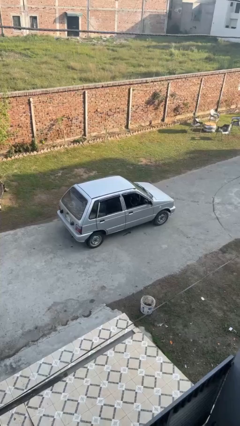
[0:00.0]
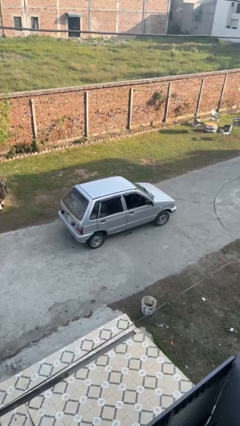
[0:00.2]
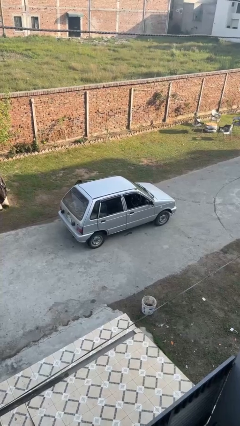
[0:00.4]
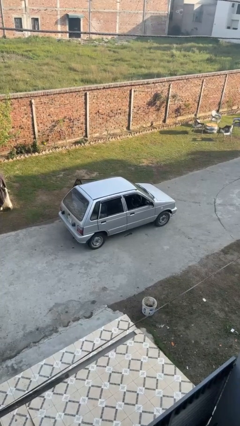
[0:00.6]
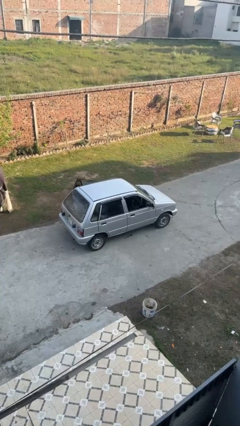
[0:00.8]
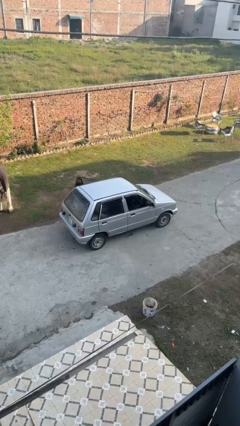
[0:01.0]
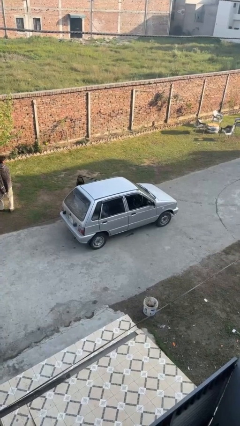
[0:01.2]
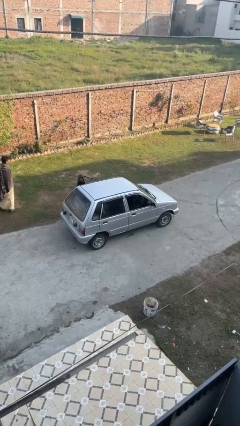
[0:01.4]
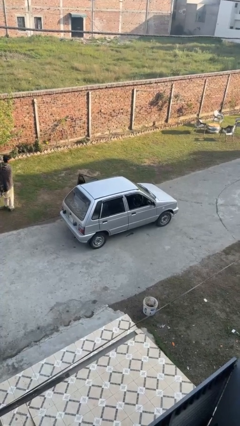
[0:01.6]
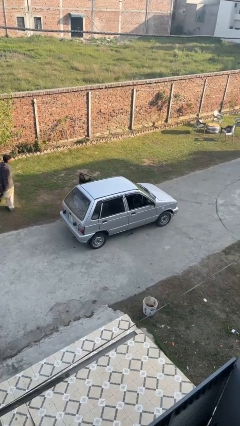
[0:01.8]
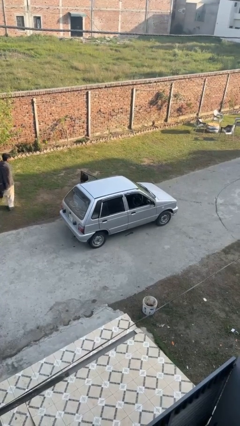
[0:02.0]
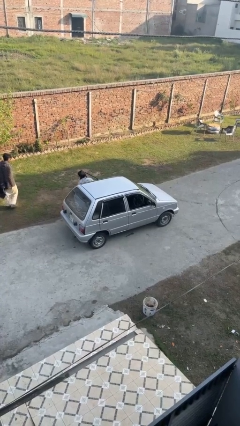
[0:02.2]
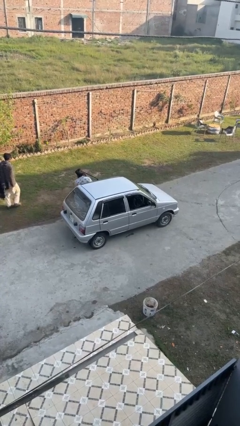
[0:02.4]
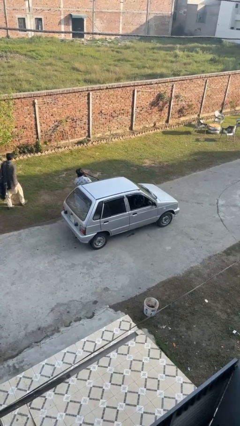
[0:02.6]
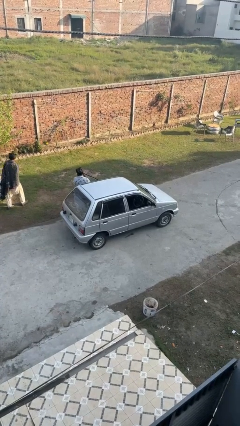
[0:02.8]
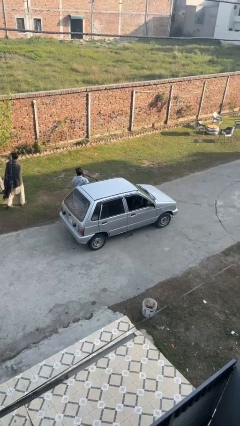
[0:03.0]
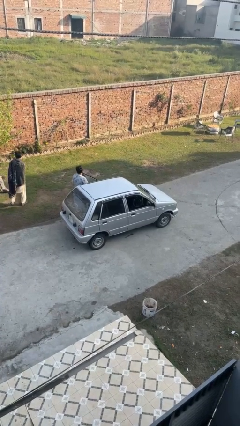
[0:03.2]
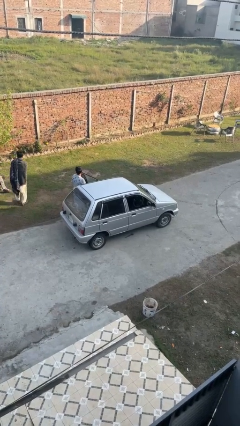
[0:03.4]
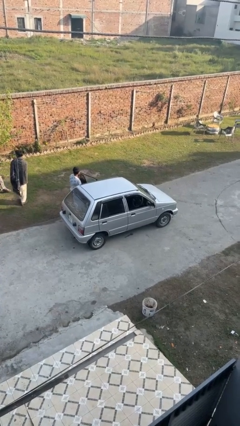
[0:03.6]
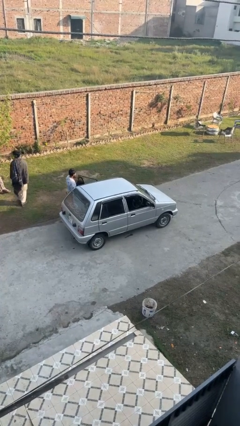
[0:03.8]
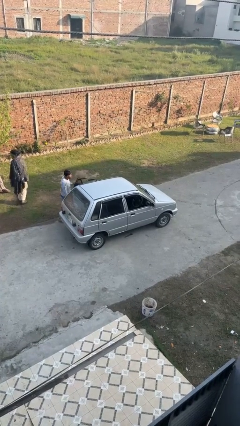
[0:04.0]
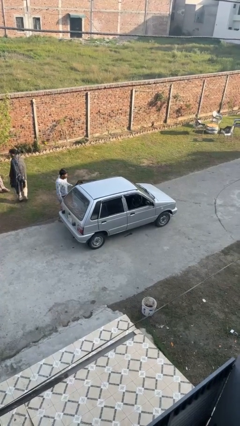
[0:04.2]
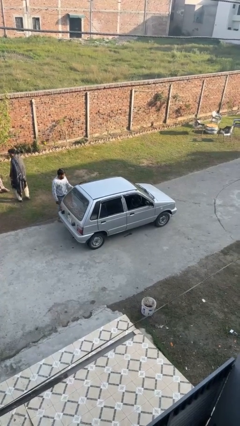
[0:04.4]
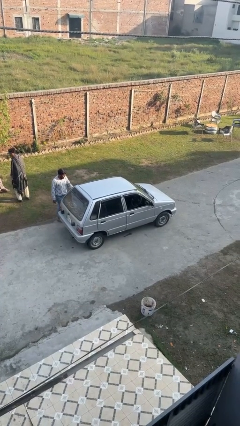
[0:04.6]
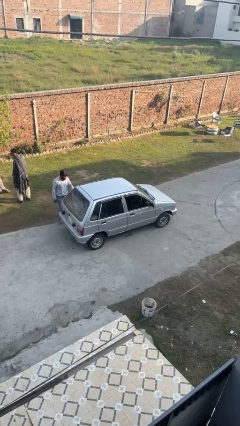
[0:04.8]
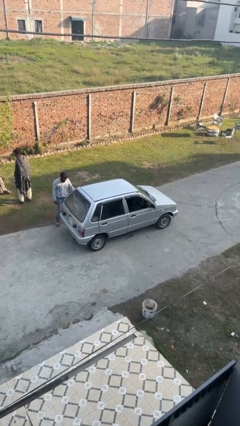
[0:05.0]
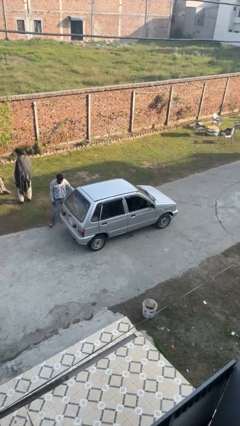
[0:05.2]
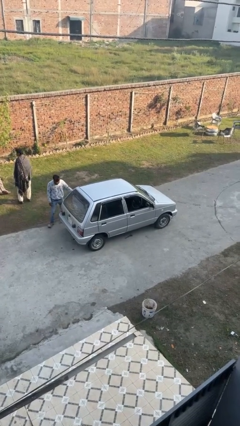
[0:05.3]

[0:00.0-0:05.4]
car drops off person

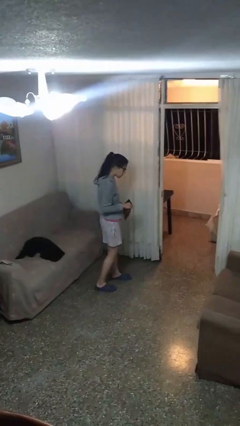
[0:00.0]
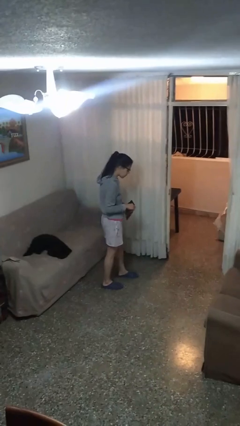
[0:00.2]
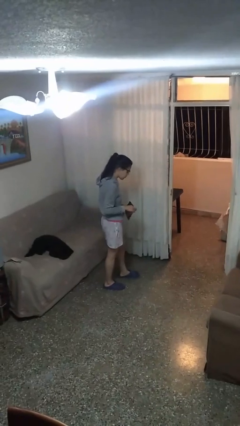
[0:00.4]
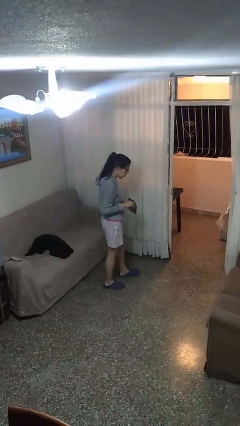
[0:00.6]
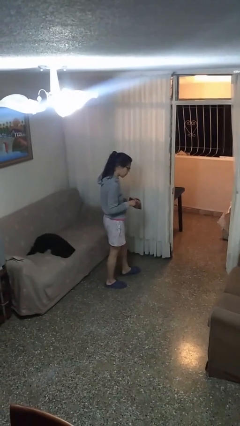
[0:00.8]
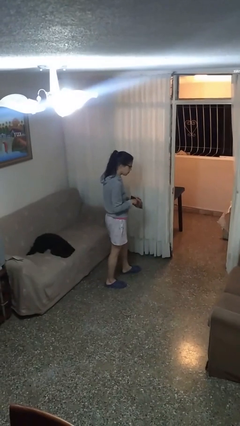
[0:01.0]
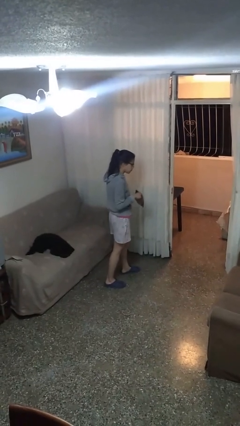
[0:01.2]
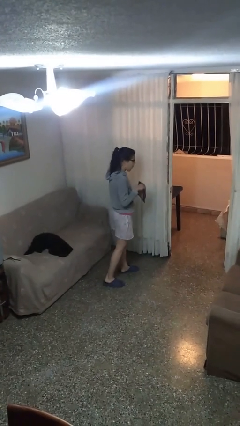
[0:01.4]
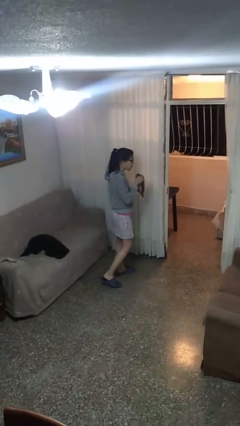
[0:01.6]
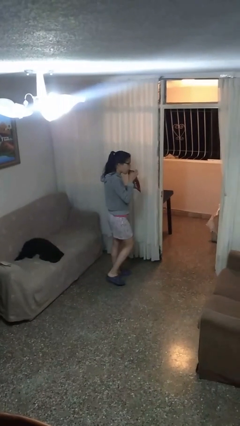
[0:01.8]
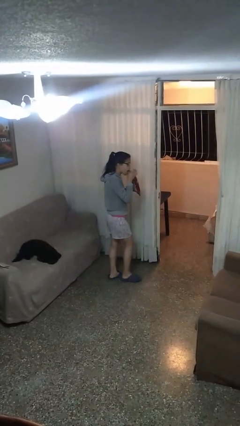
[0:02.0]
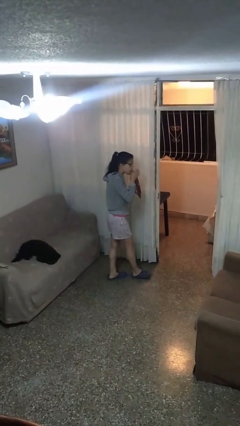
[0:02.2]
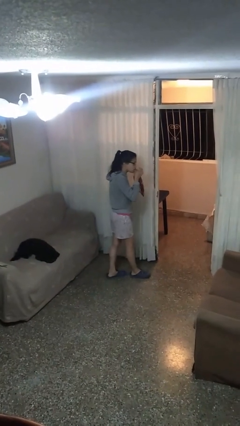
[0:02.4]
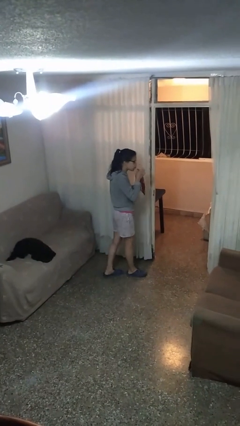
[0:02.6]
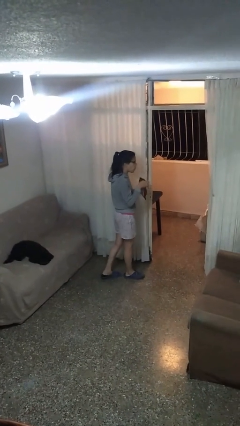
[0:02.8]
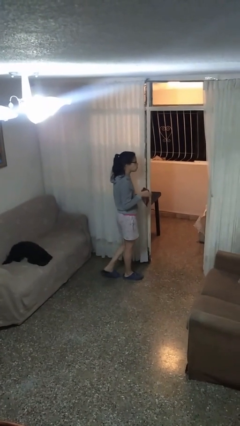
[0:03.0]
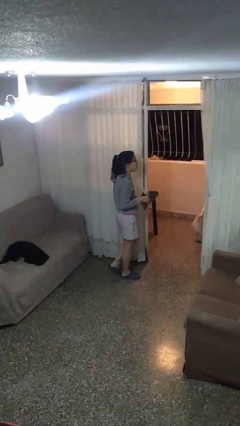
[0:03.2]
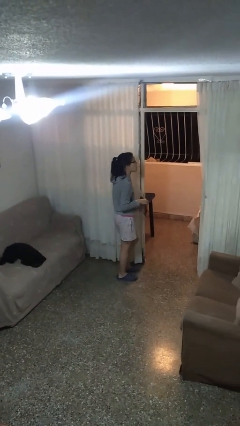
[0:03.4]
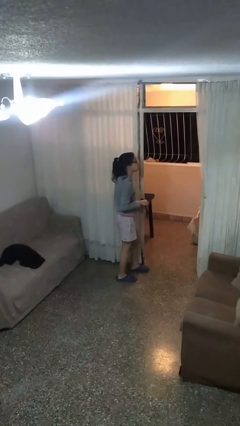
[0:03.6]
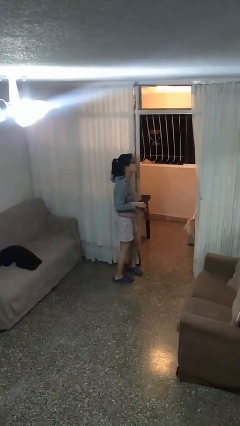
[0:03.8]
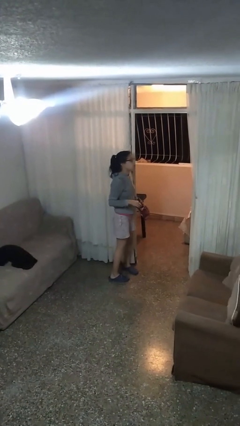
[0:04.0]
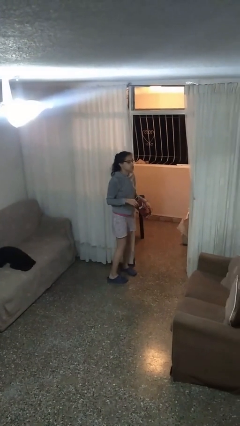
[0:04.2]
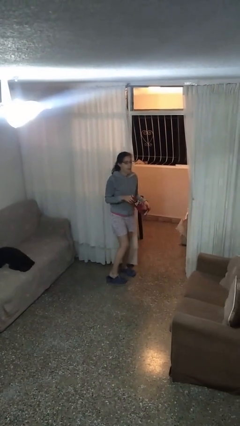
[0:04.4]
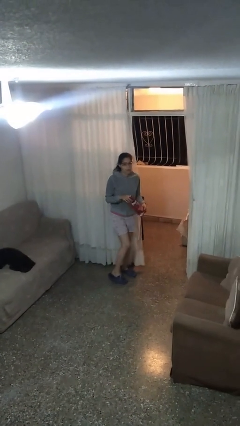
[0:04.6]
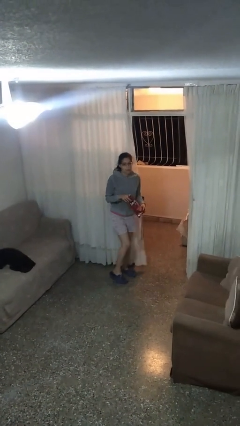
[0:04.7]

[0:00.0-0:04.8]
person eats snack from bag

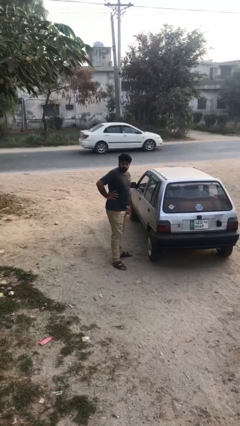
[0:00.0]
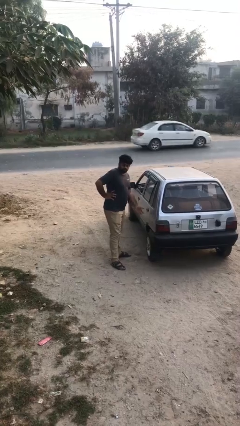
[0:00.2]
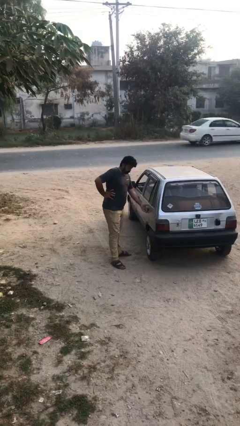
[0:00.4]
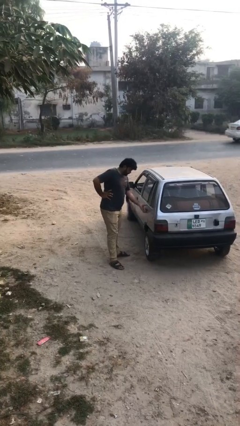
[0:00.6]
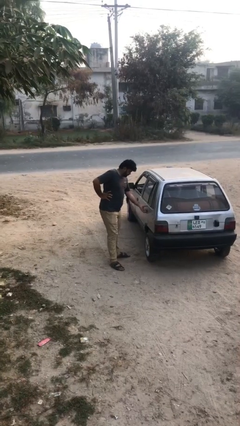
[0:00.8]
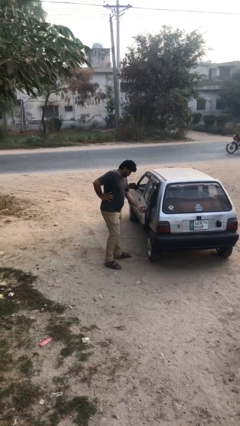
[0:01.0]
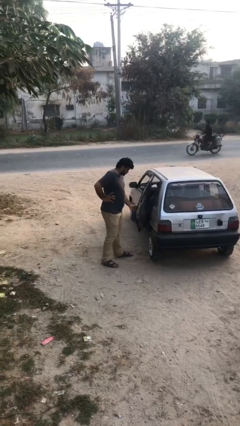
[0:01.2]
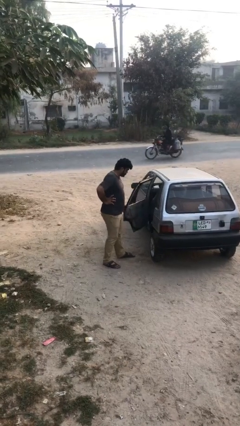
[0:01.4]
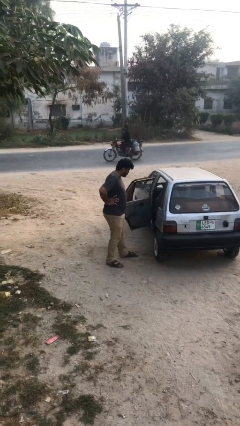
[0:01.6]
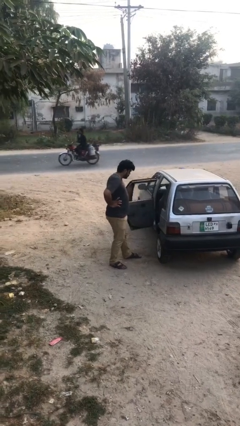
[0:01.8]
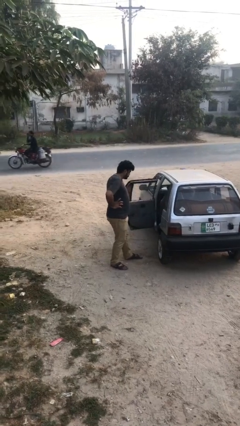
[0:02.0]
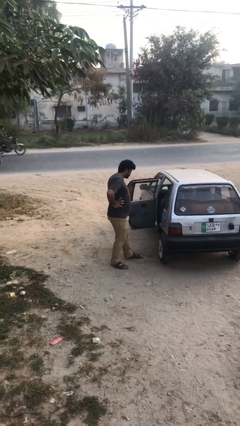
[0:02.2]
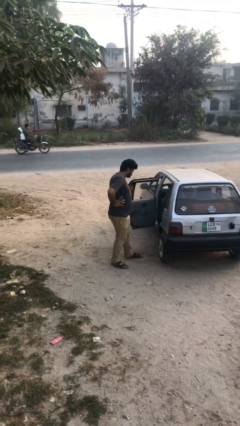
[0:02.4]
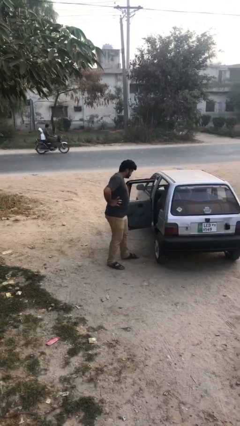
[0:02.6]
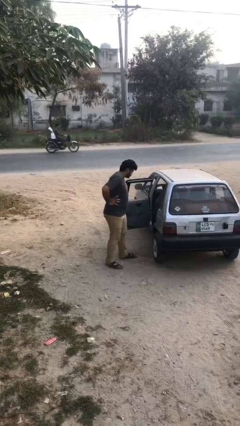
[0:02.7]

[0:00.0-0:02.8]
person opens car door

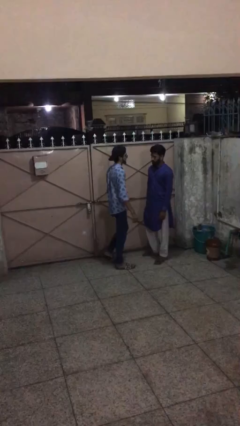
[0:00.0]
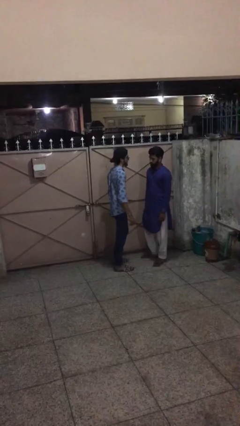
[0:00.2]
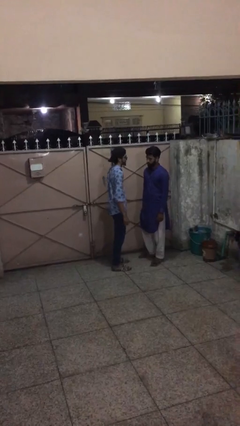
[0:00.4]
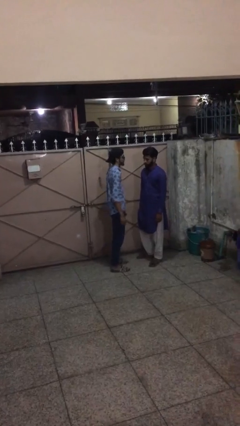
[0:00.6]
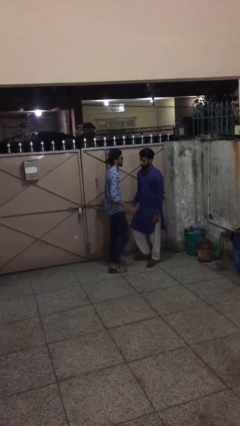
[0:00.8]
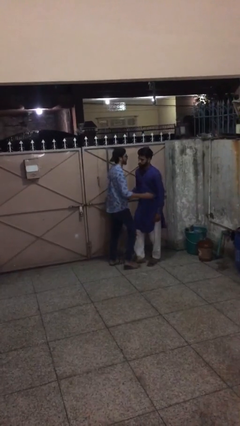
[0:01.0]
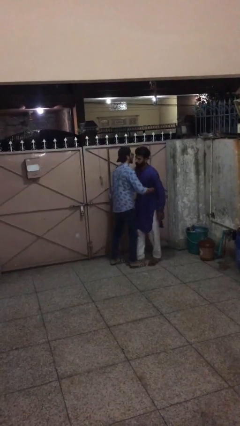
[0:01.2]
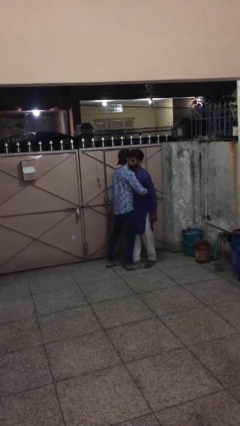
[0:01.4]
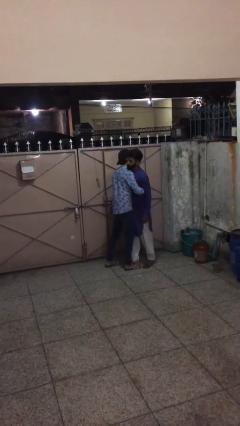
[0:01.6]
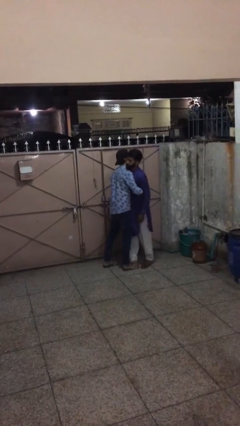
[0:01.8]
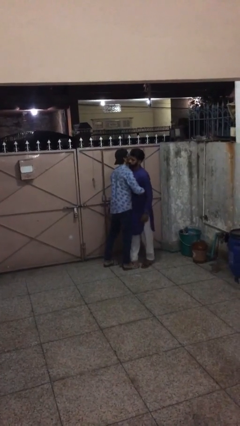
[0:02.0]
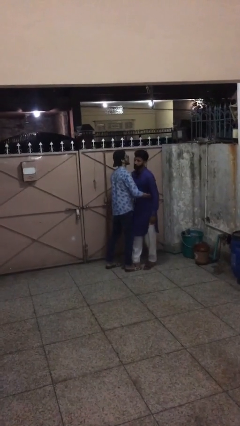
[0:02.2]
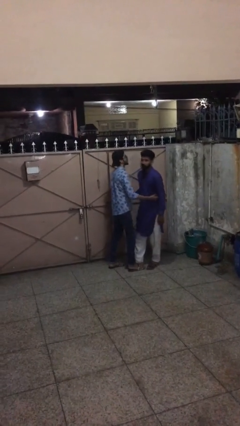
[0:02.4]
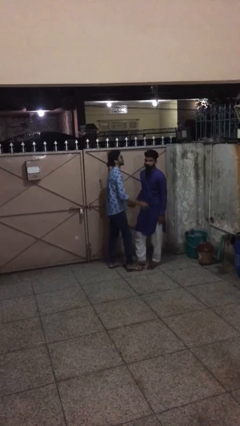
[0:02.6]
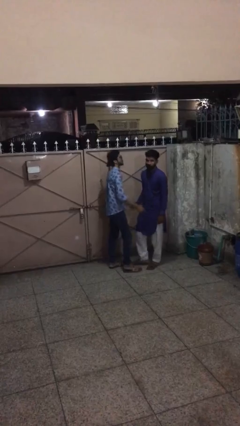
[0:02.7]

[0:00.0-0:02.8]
person embraces person

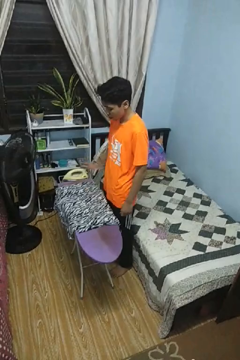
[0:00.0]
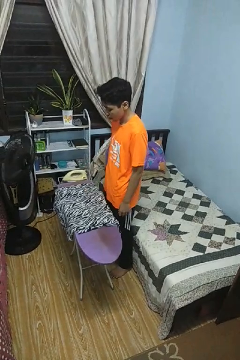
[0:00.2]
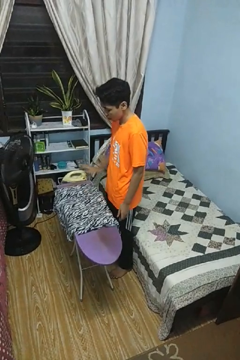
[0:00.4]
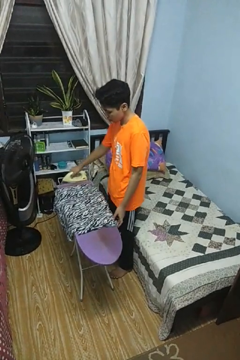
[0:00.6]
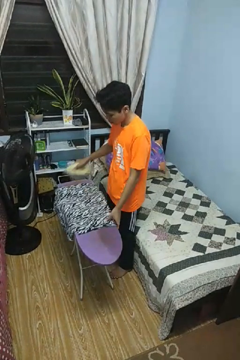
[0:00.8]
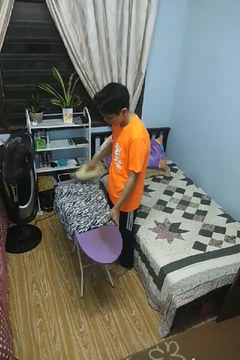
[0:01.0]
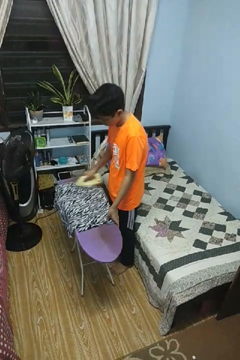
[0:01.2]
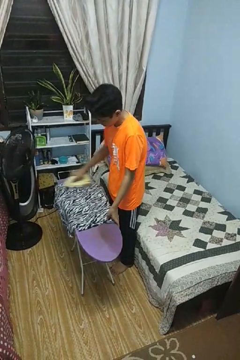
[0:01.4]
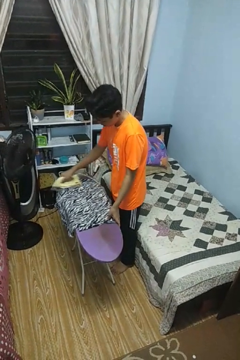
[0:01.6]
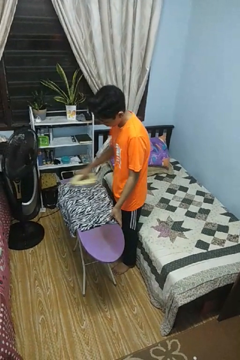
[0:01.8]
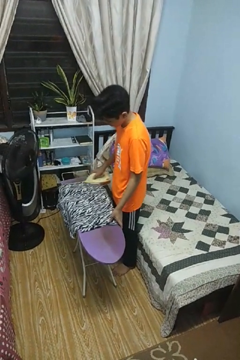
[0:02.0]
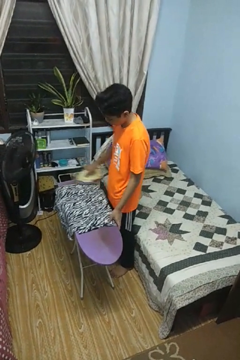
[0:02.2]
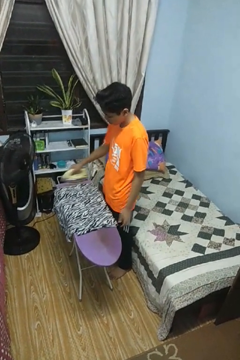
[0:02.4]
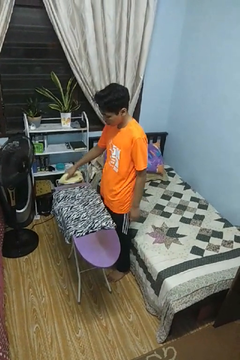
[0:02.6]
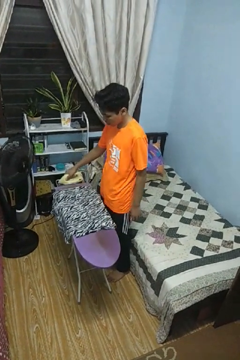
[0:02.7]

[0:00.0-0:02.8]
person irons clothes
